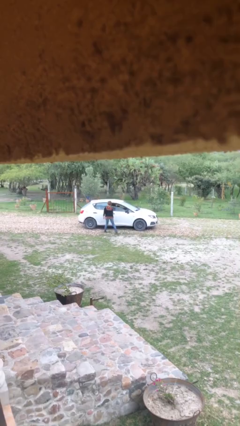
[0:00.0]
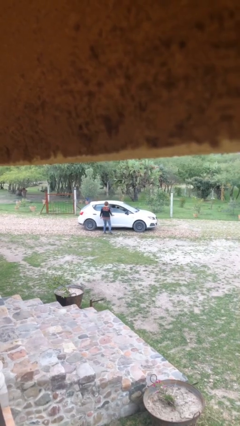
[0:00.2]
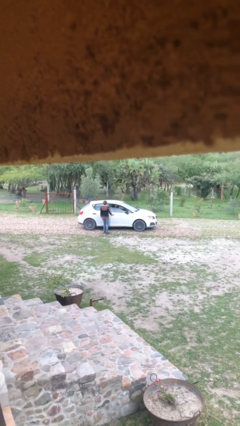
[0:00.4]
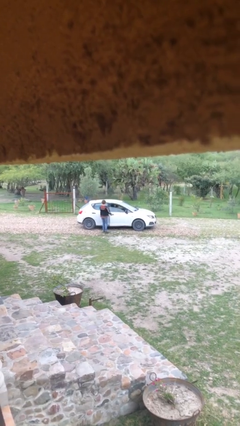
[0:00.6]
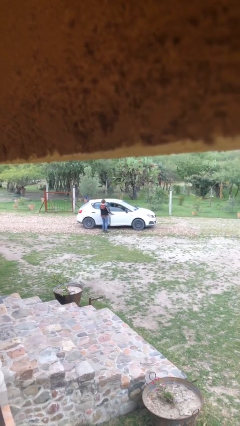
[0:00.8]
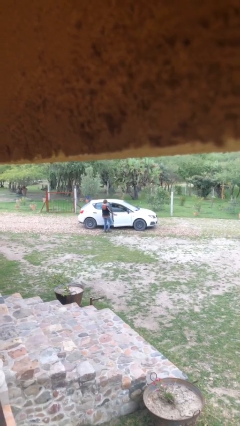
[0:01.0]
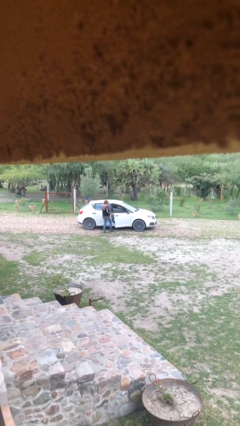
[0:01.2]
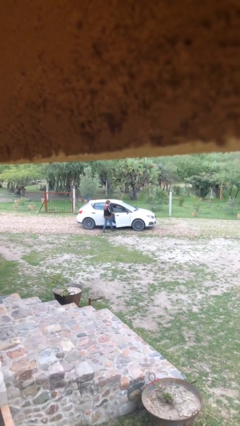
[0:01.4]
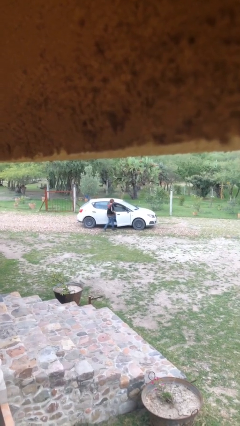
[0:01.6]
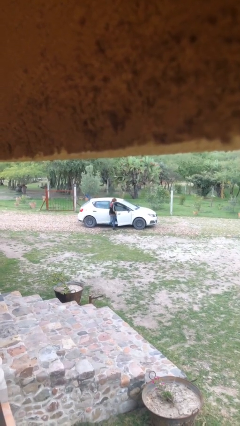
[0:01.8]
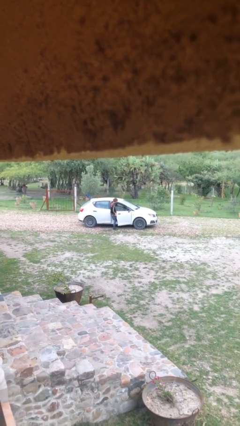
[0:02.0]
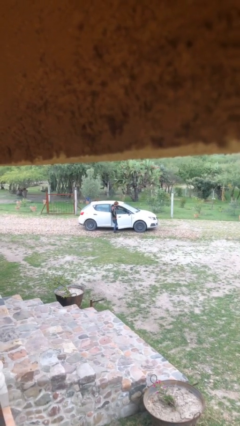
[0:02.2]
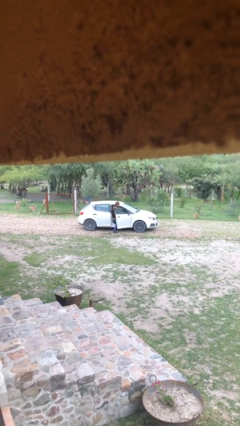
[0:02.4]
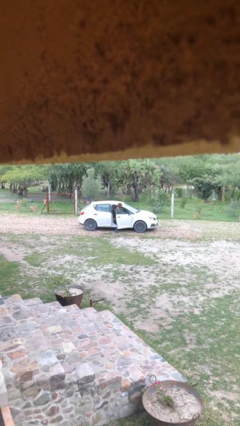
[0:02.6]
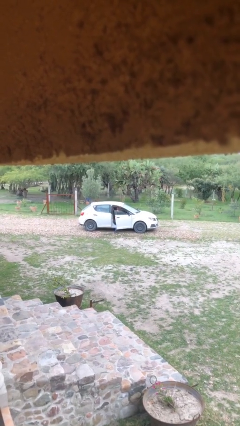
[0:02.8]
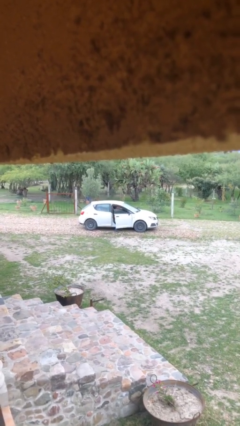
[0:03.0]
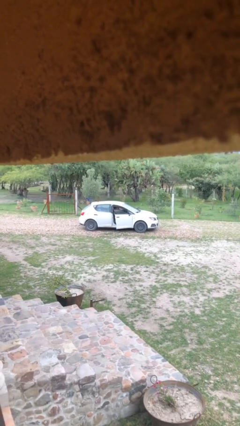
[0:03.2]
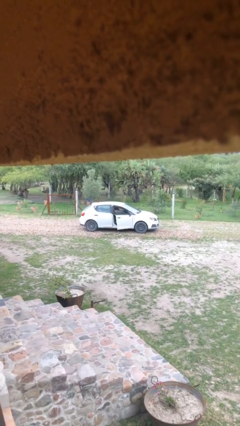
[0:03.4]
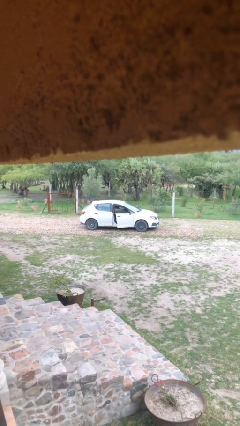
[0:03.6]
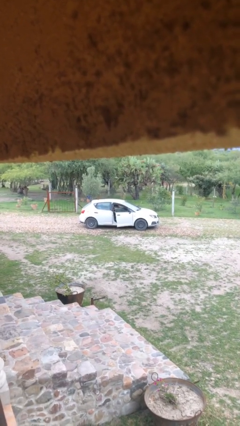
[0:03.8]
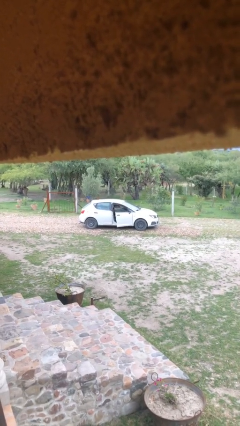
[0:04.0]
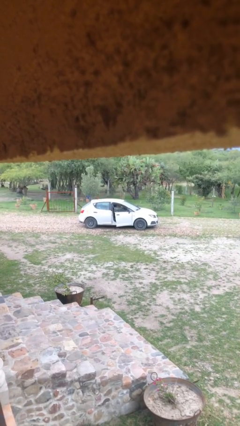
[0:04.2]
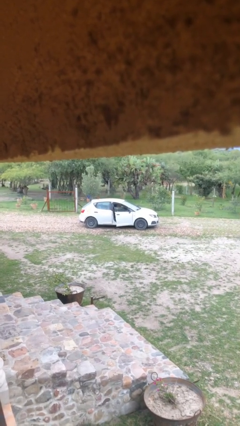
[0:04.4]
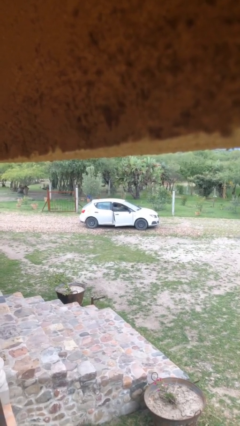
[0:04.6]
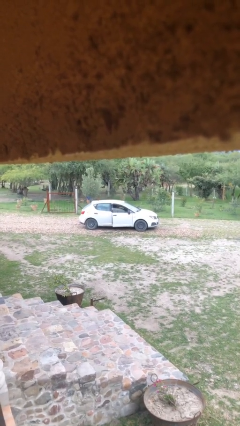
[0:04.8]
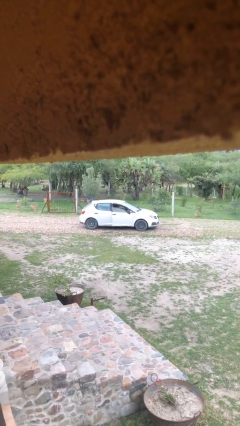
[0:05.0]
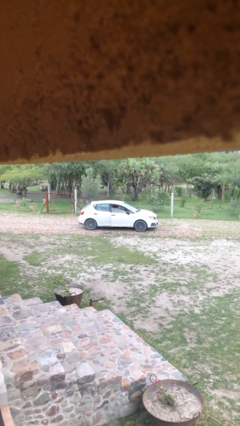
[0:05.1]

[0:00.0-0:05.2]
car picks up person

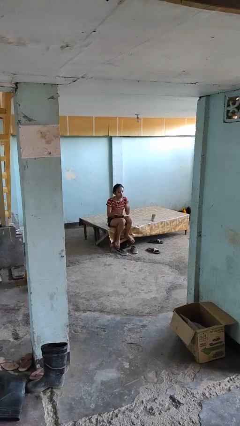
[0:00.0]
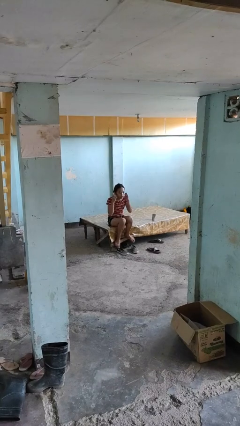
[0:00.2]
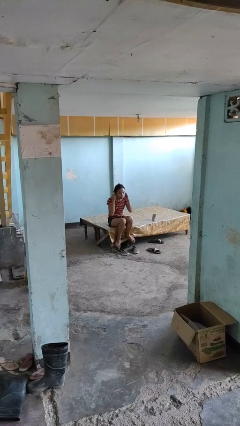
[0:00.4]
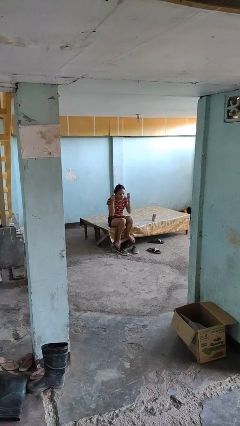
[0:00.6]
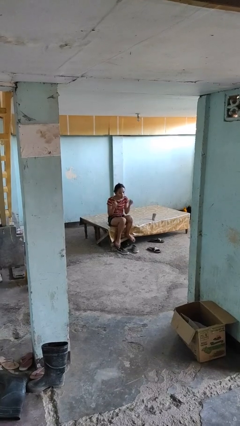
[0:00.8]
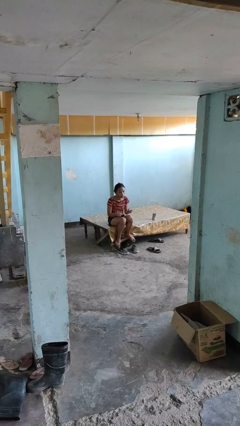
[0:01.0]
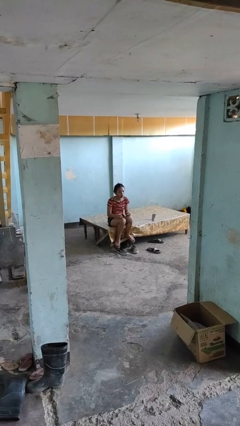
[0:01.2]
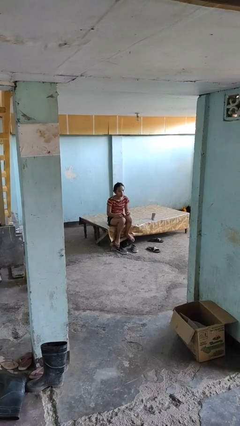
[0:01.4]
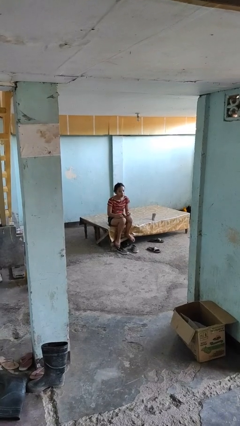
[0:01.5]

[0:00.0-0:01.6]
person takes off headphones

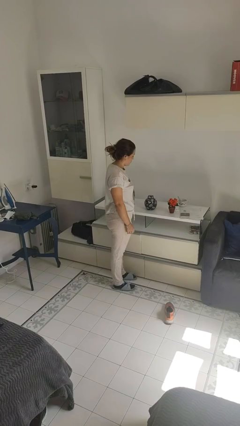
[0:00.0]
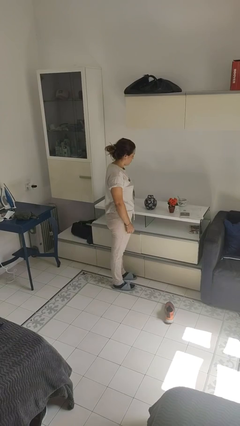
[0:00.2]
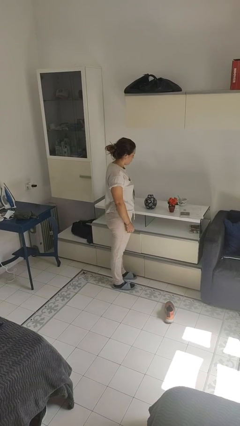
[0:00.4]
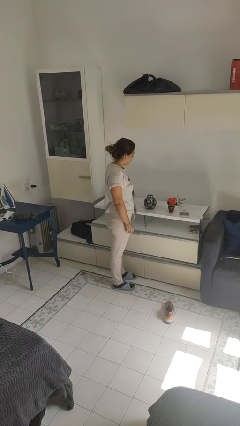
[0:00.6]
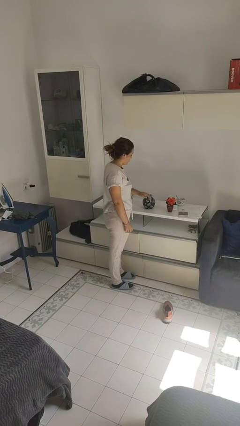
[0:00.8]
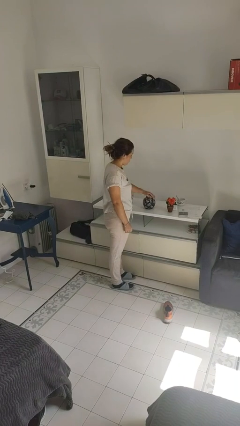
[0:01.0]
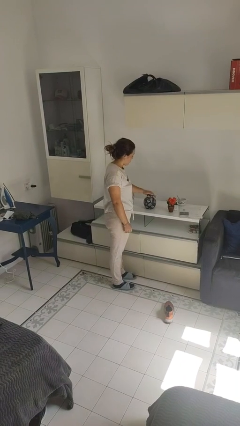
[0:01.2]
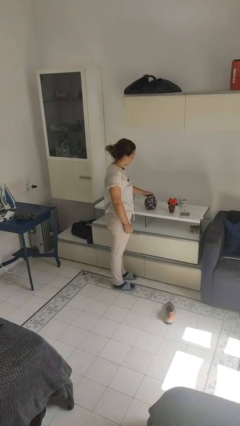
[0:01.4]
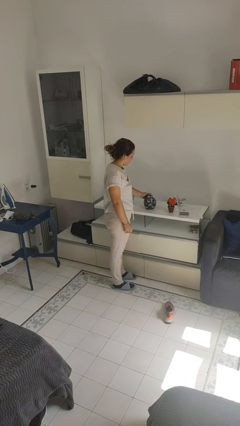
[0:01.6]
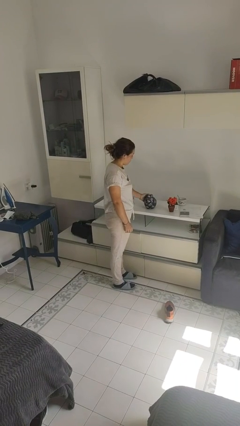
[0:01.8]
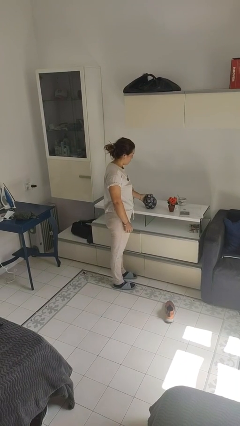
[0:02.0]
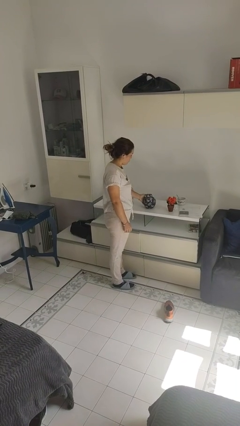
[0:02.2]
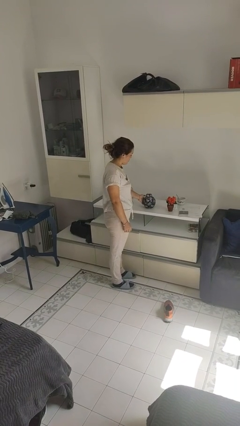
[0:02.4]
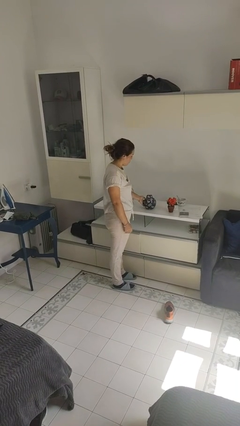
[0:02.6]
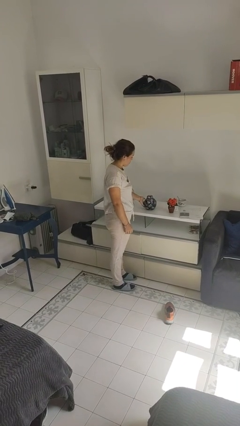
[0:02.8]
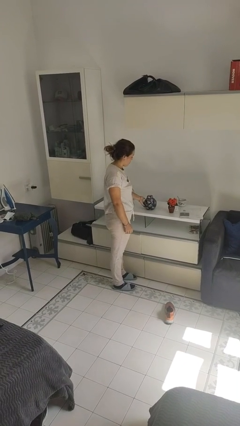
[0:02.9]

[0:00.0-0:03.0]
person waves hand over object

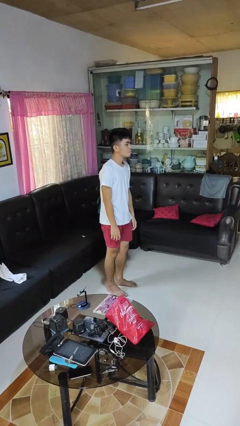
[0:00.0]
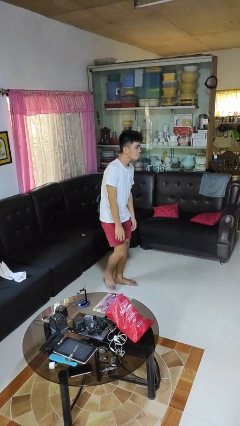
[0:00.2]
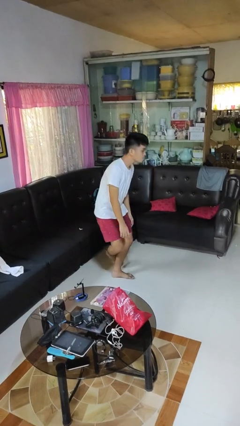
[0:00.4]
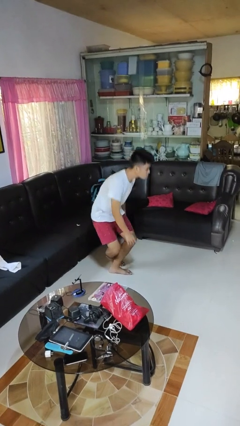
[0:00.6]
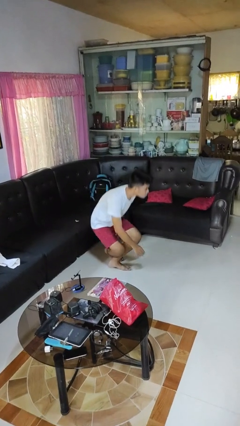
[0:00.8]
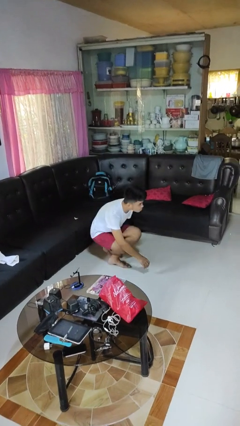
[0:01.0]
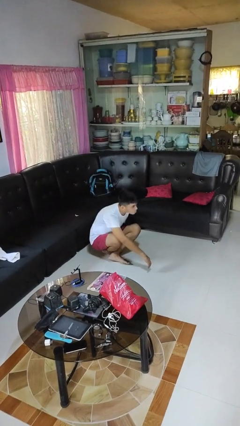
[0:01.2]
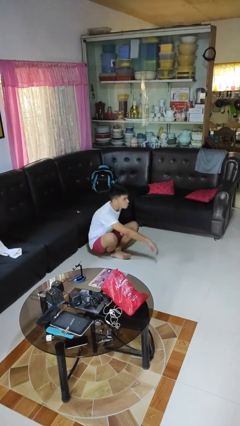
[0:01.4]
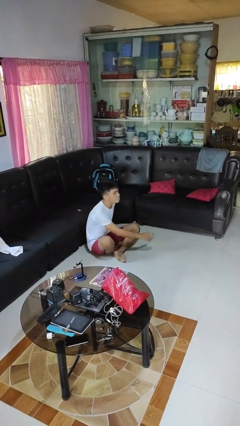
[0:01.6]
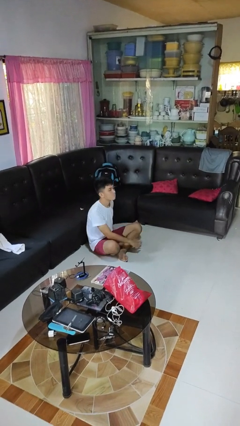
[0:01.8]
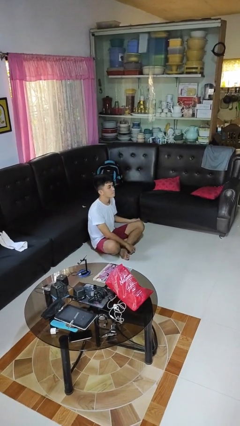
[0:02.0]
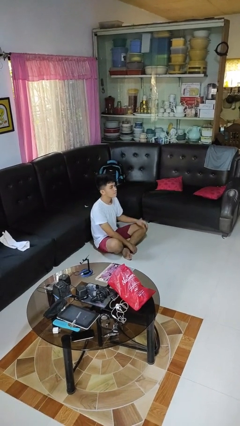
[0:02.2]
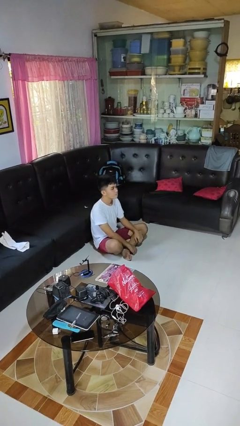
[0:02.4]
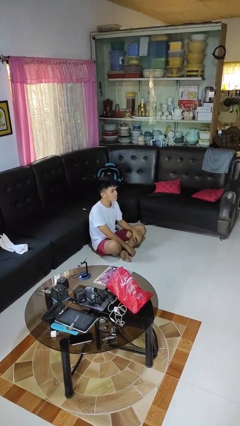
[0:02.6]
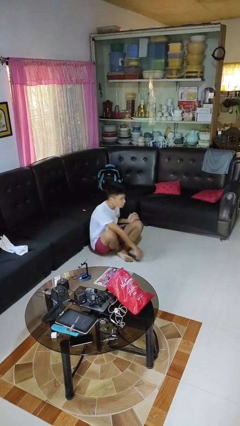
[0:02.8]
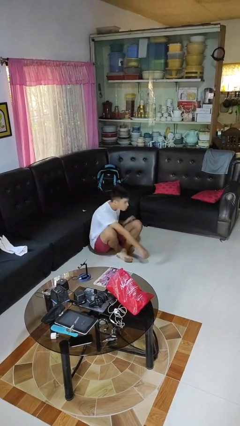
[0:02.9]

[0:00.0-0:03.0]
person sits crisscross

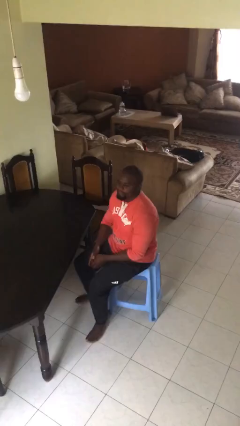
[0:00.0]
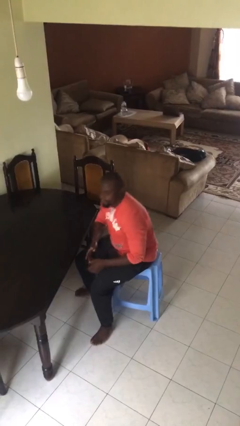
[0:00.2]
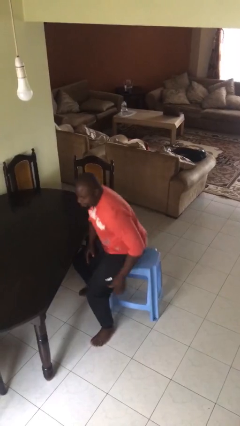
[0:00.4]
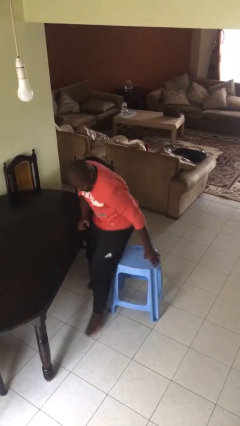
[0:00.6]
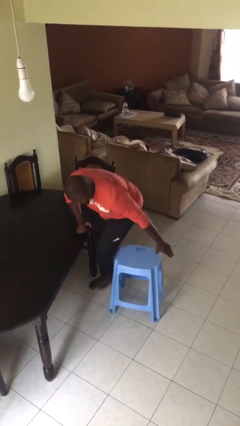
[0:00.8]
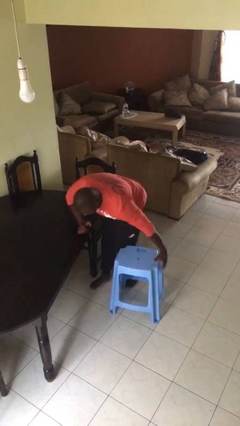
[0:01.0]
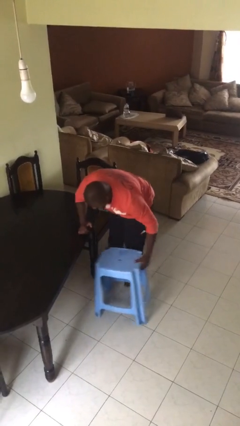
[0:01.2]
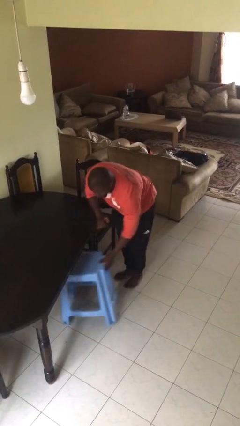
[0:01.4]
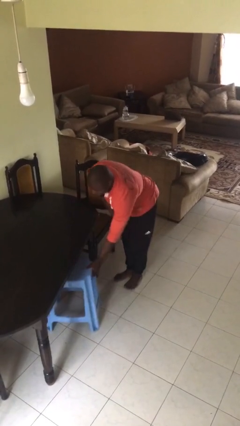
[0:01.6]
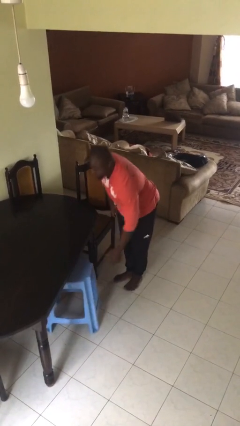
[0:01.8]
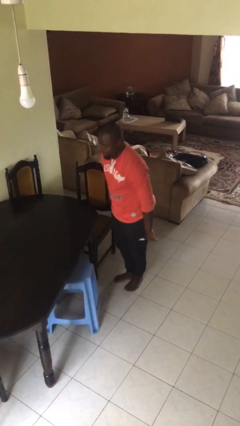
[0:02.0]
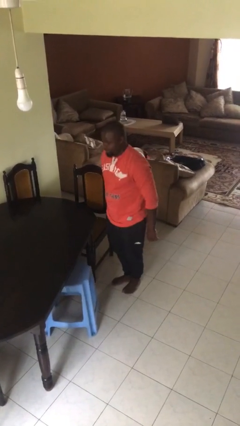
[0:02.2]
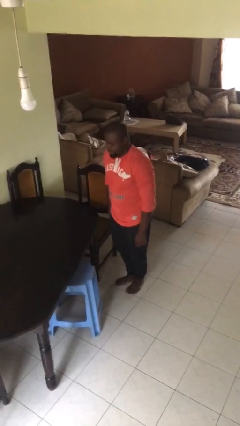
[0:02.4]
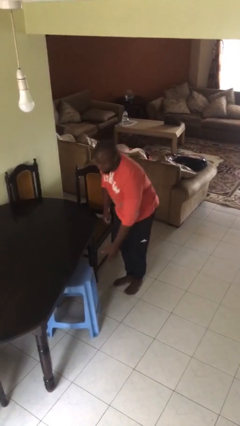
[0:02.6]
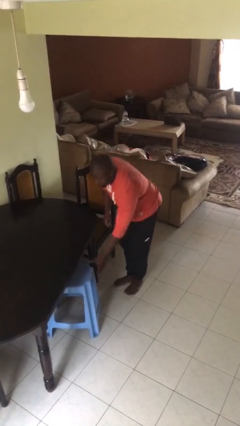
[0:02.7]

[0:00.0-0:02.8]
person stands up

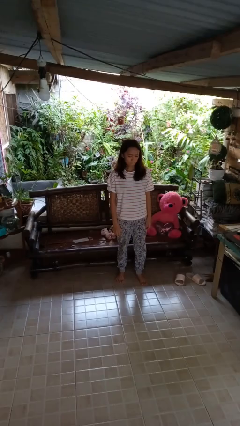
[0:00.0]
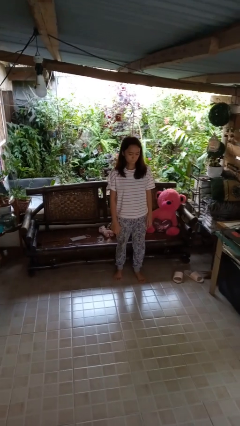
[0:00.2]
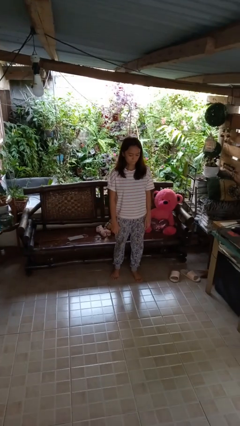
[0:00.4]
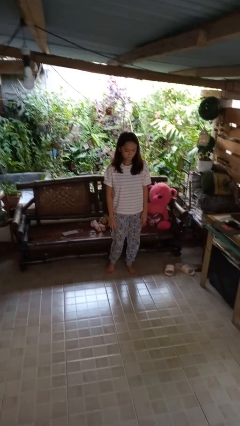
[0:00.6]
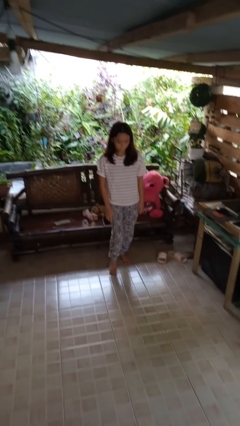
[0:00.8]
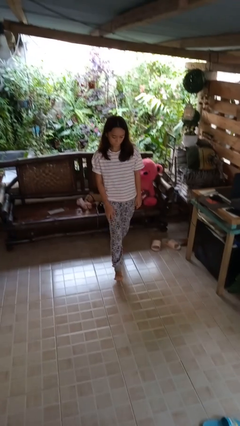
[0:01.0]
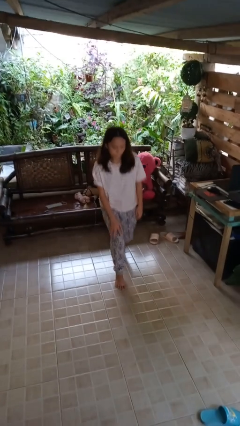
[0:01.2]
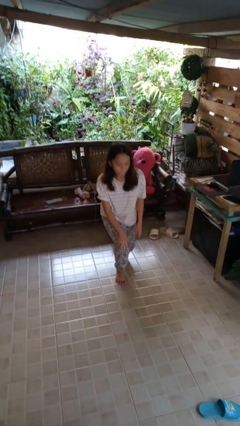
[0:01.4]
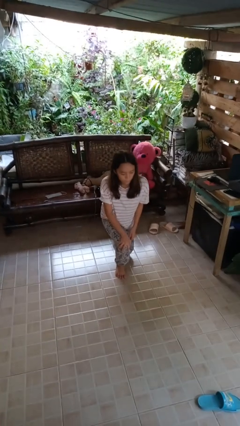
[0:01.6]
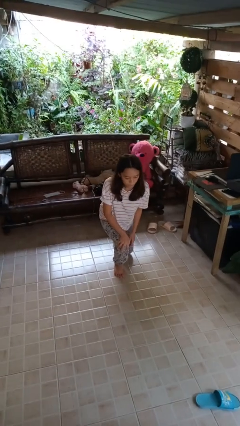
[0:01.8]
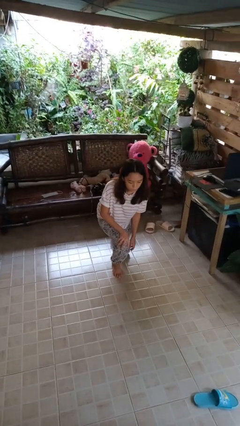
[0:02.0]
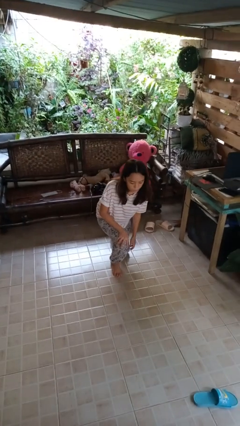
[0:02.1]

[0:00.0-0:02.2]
person kneels
